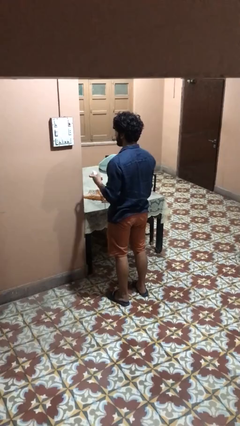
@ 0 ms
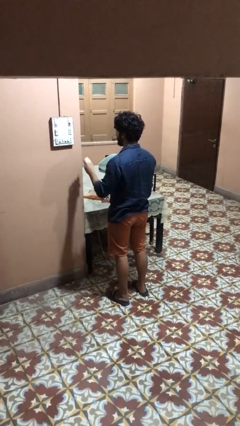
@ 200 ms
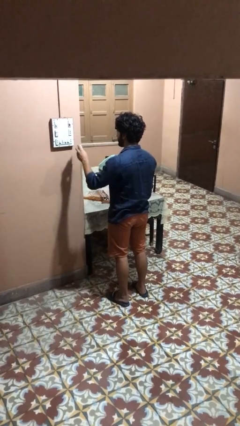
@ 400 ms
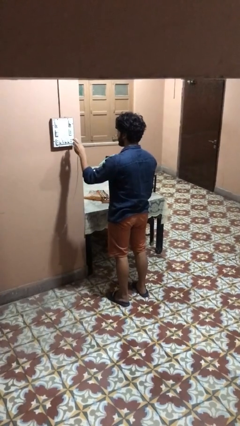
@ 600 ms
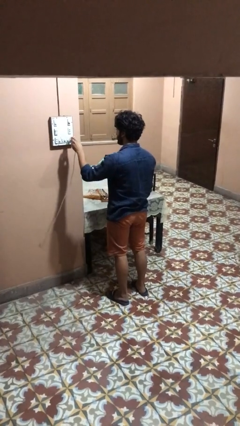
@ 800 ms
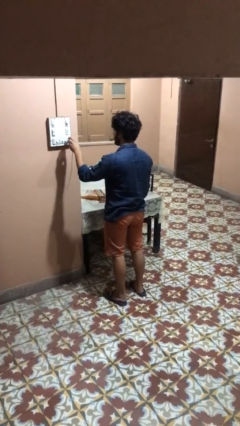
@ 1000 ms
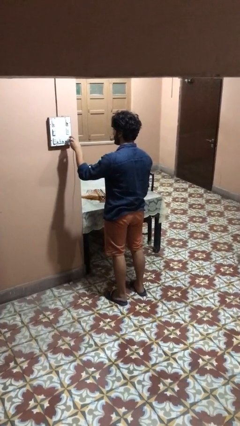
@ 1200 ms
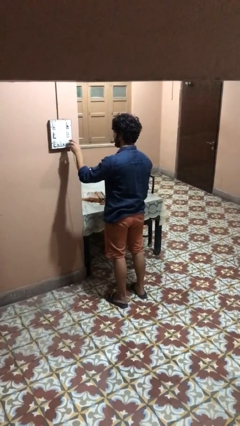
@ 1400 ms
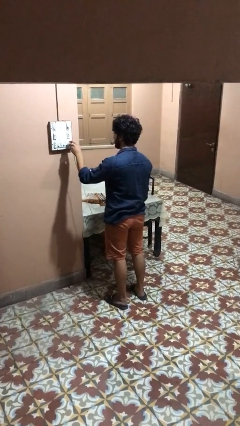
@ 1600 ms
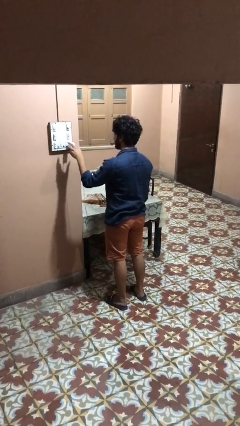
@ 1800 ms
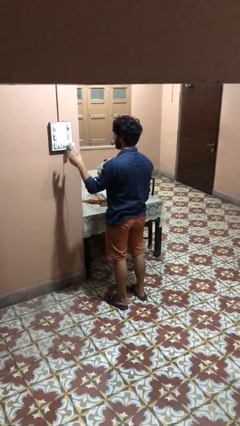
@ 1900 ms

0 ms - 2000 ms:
person plugs into electrical socket

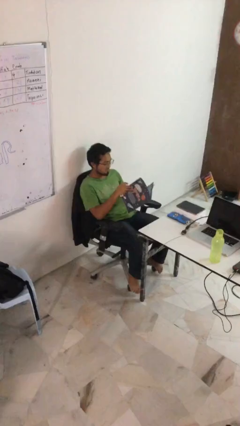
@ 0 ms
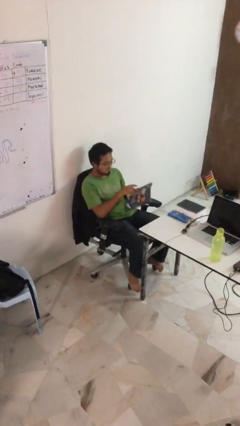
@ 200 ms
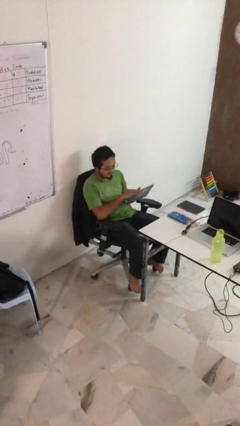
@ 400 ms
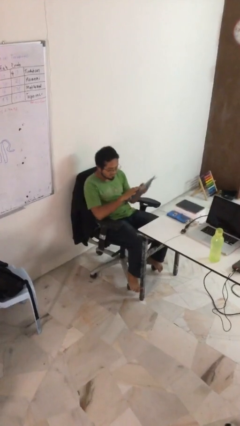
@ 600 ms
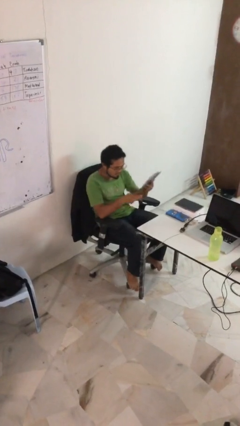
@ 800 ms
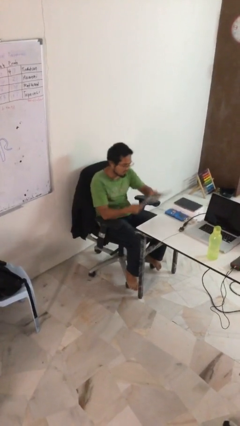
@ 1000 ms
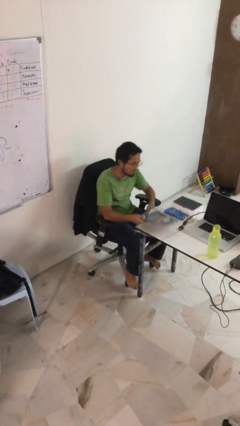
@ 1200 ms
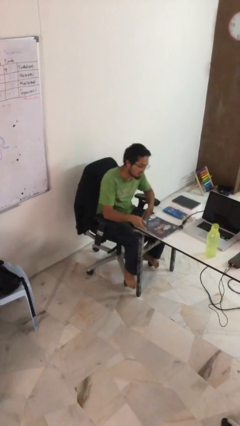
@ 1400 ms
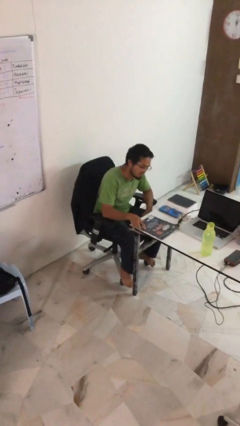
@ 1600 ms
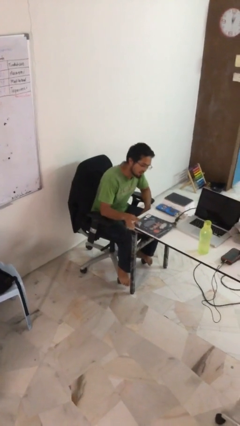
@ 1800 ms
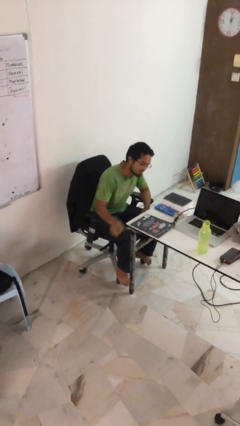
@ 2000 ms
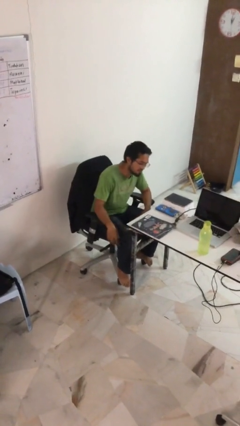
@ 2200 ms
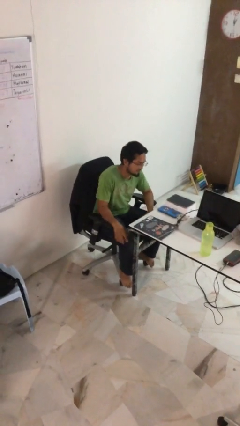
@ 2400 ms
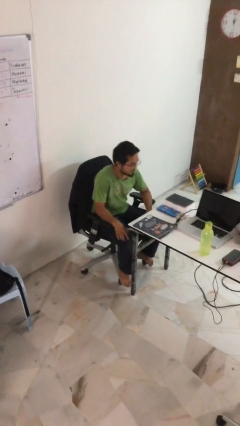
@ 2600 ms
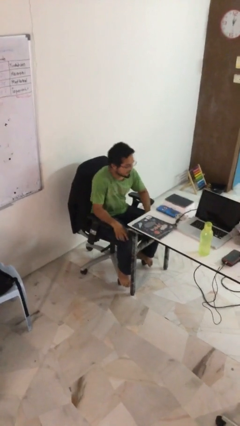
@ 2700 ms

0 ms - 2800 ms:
person puts down object on table

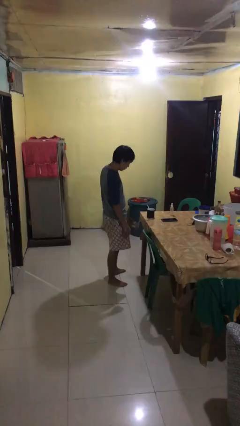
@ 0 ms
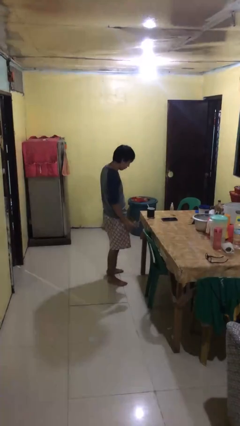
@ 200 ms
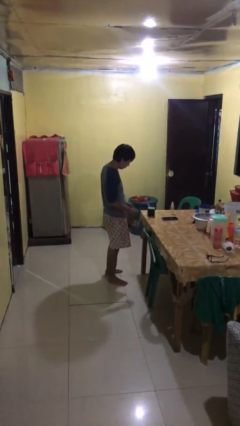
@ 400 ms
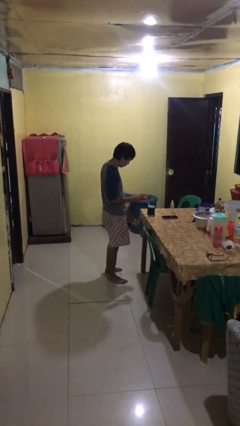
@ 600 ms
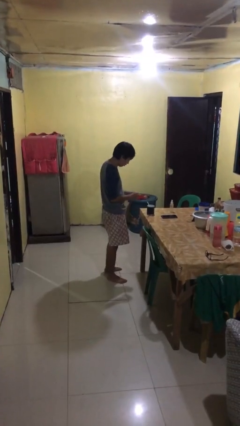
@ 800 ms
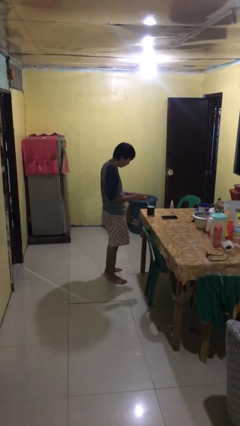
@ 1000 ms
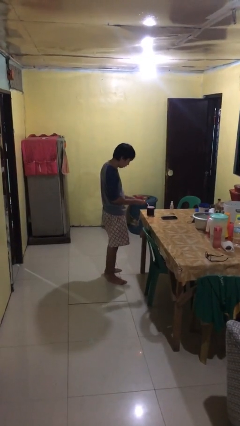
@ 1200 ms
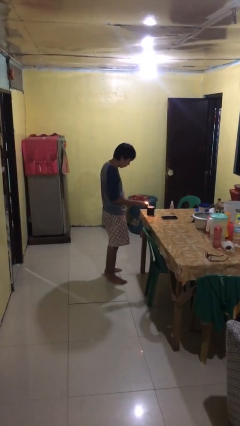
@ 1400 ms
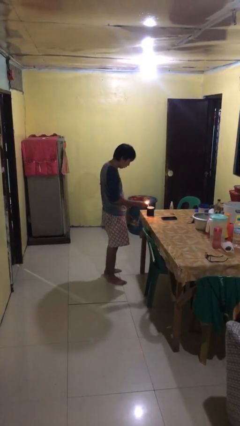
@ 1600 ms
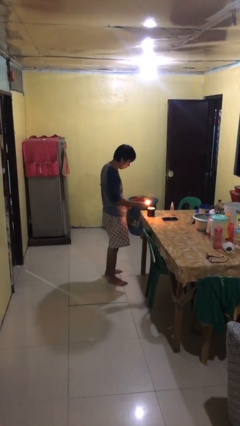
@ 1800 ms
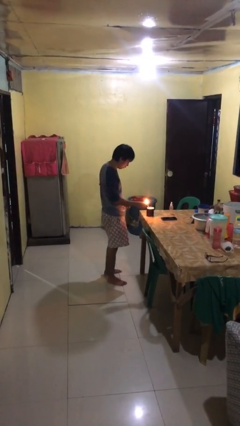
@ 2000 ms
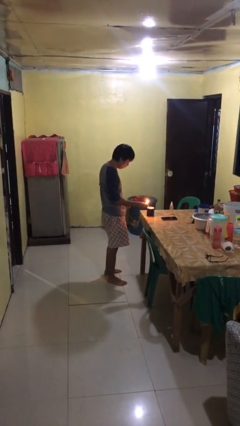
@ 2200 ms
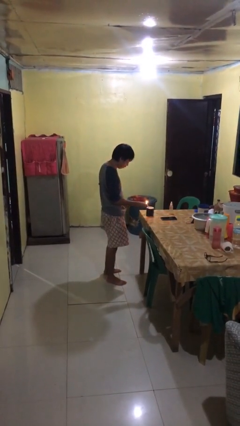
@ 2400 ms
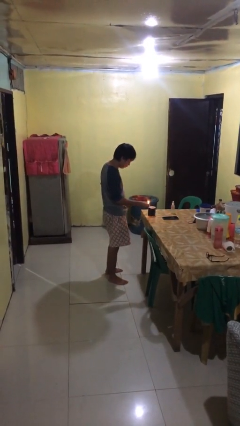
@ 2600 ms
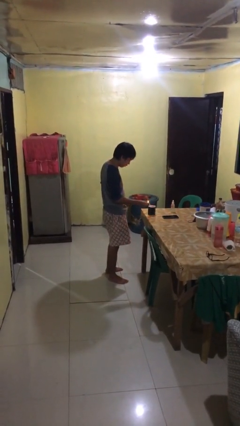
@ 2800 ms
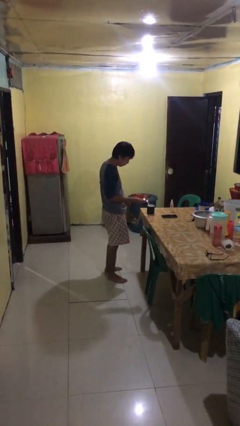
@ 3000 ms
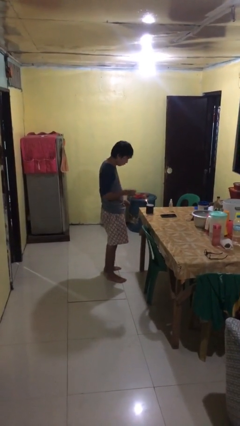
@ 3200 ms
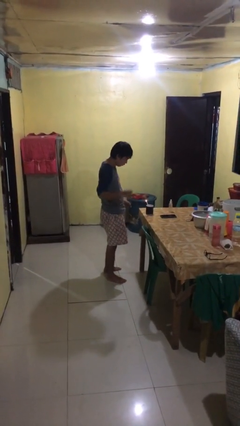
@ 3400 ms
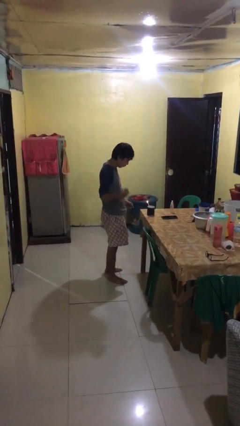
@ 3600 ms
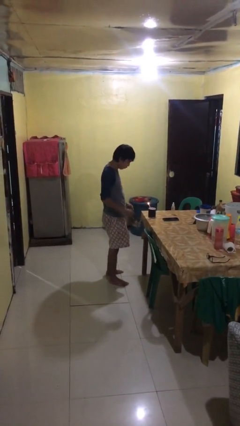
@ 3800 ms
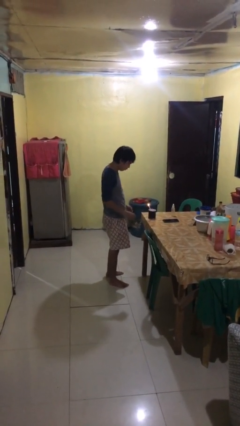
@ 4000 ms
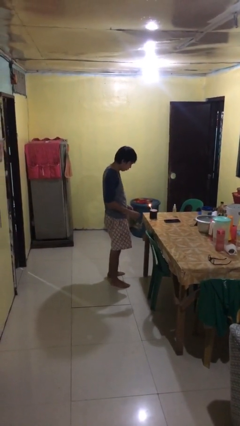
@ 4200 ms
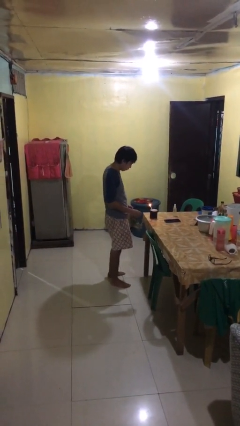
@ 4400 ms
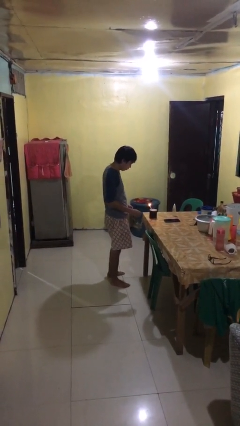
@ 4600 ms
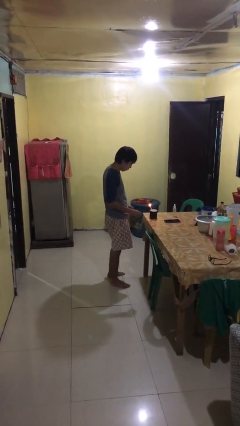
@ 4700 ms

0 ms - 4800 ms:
person lights candle

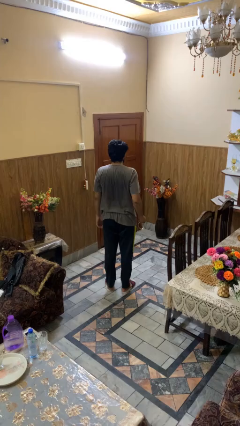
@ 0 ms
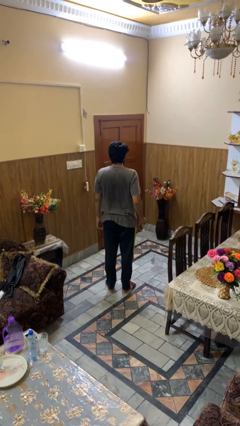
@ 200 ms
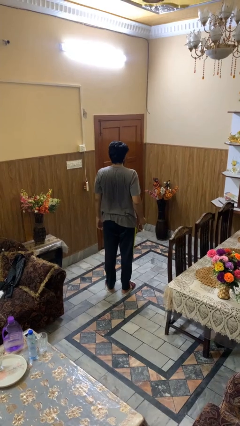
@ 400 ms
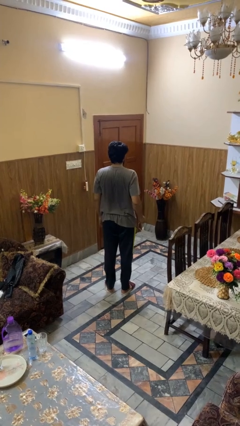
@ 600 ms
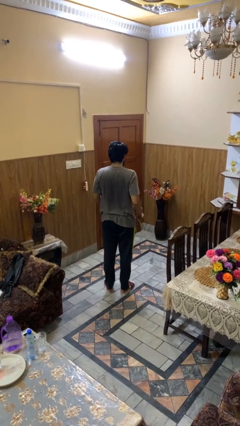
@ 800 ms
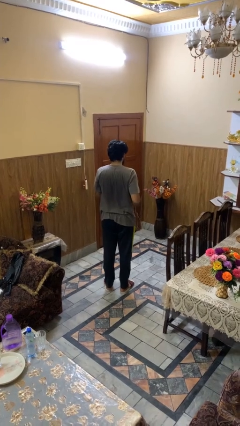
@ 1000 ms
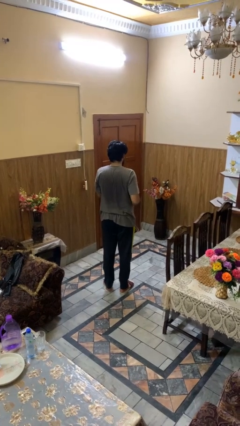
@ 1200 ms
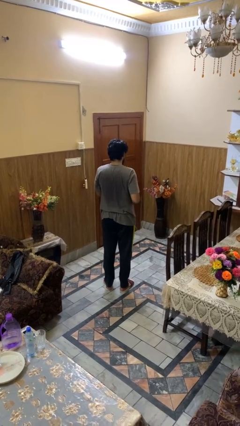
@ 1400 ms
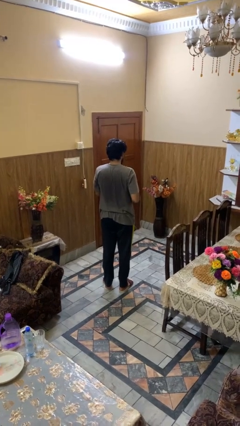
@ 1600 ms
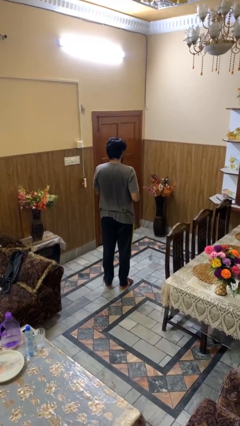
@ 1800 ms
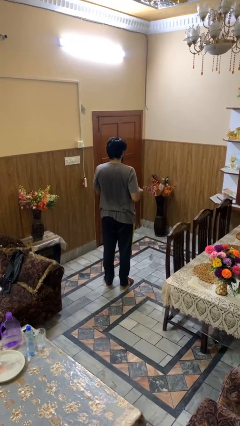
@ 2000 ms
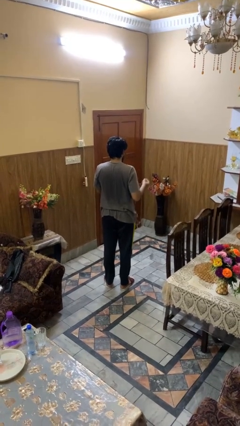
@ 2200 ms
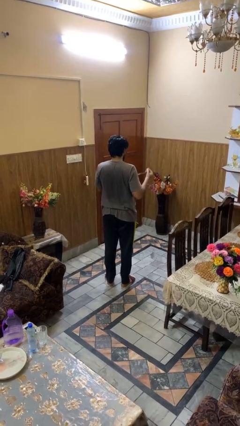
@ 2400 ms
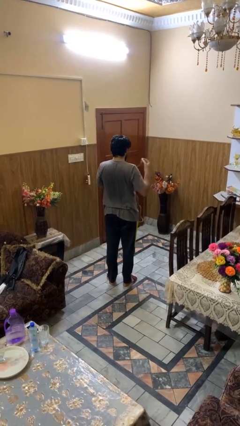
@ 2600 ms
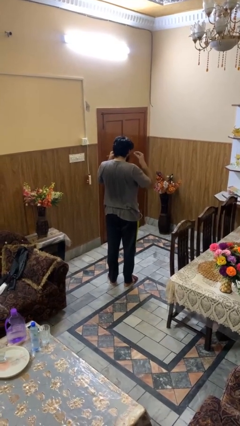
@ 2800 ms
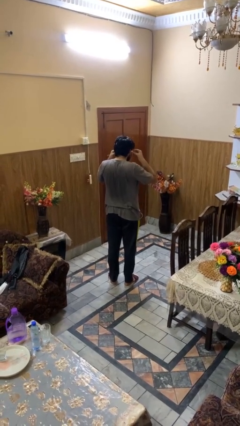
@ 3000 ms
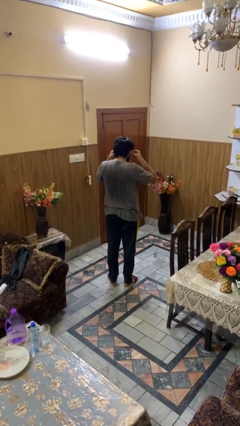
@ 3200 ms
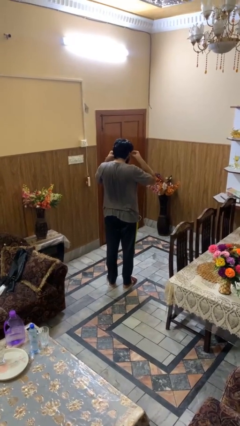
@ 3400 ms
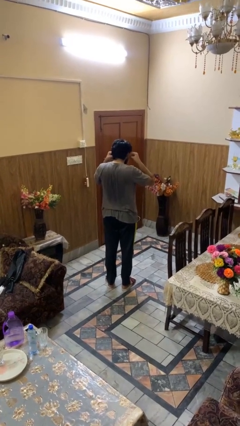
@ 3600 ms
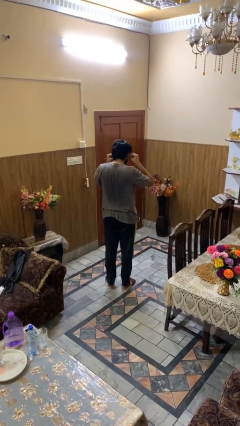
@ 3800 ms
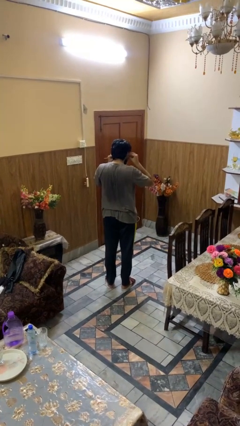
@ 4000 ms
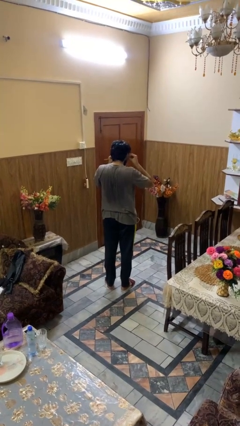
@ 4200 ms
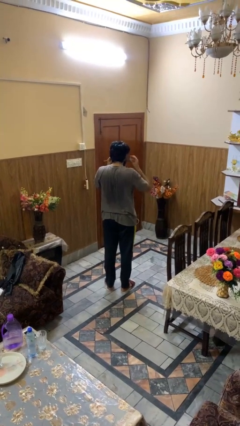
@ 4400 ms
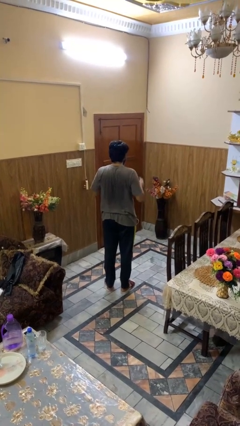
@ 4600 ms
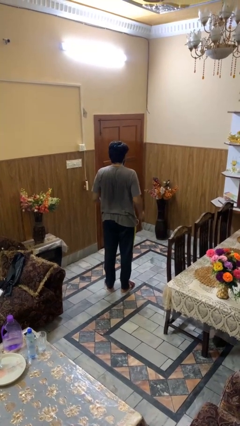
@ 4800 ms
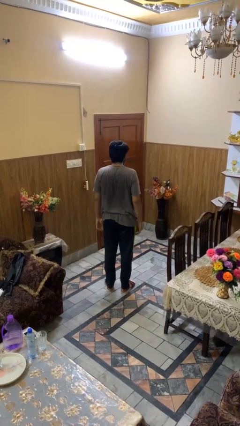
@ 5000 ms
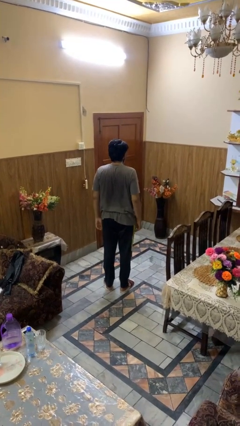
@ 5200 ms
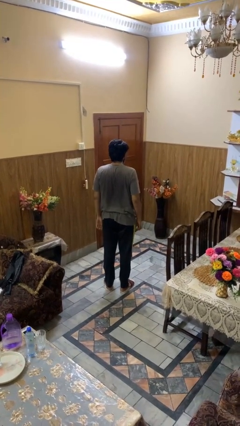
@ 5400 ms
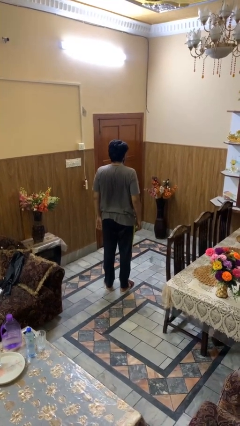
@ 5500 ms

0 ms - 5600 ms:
person puts on headphones

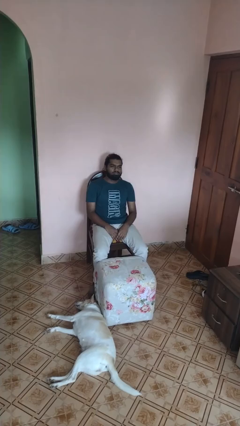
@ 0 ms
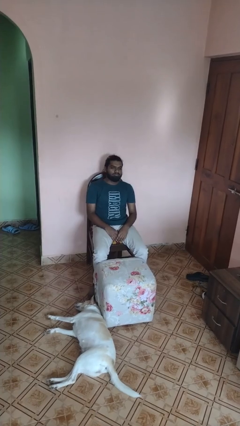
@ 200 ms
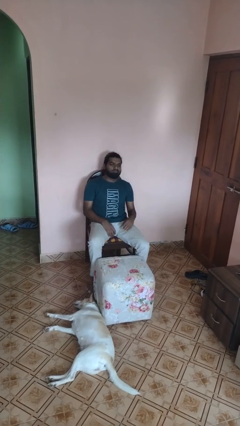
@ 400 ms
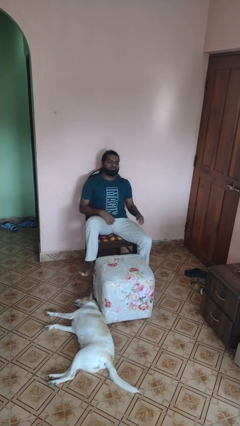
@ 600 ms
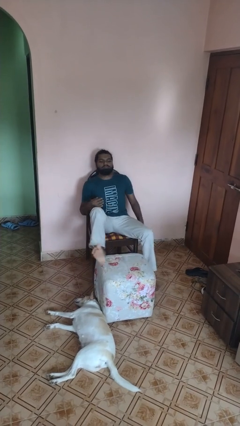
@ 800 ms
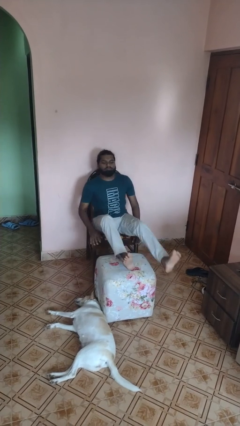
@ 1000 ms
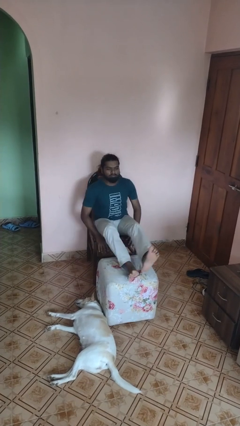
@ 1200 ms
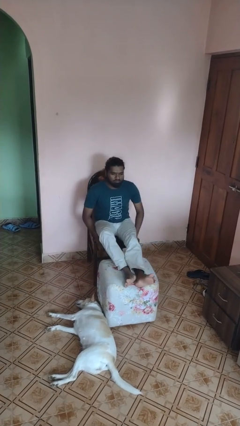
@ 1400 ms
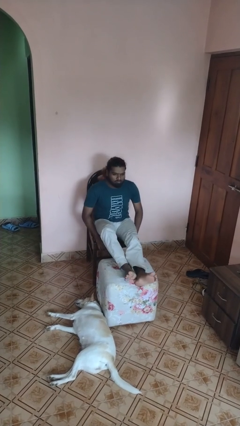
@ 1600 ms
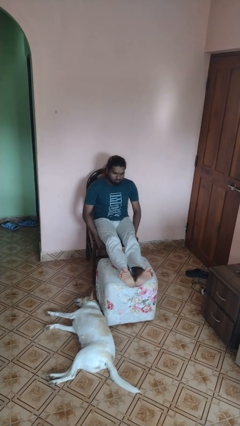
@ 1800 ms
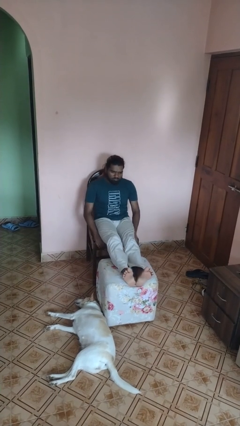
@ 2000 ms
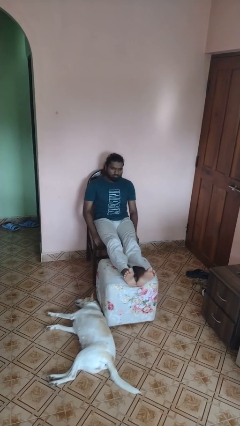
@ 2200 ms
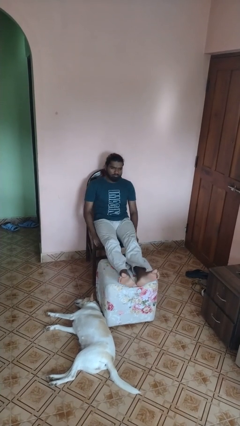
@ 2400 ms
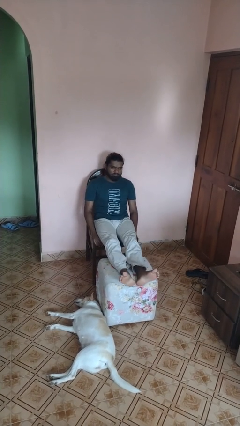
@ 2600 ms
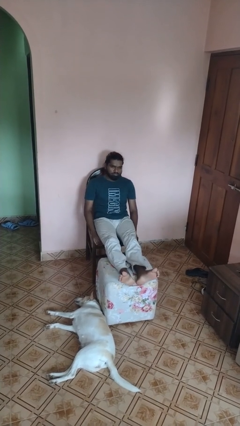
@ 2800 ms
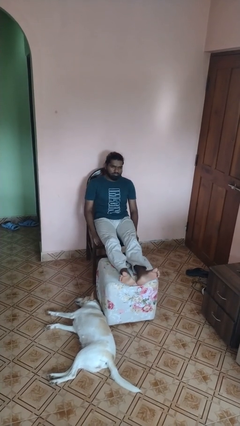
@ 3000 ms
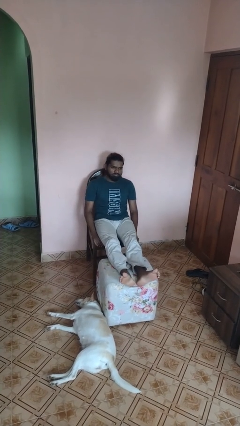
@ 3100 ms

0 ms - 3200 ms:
person puts feet up
